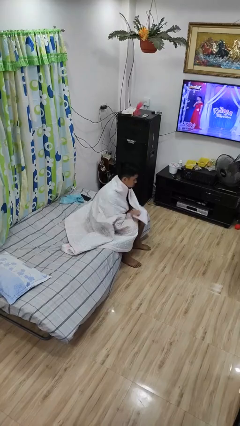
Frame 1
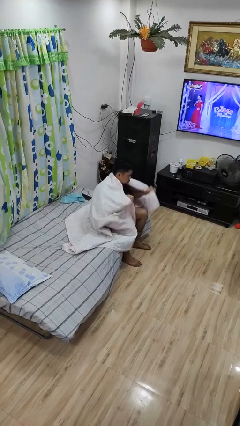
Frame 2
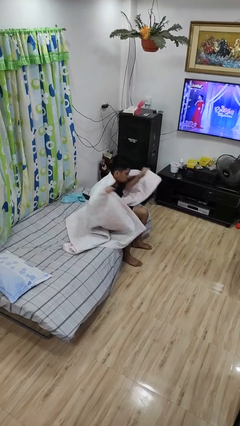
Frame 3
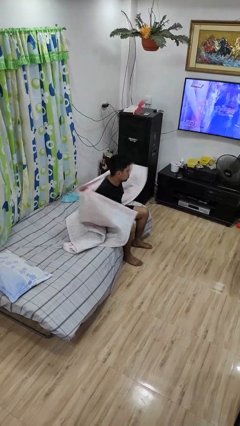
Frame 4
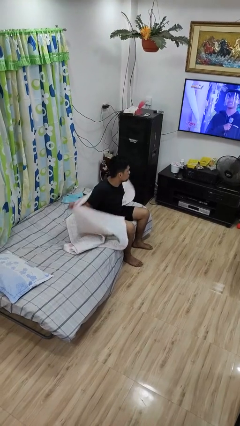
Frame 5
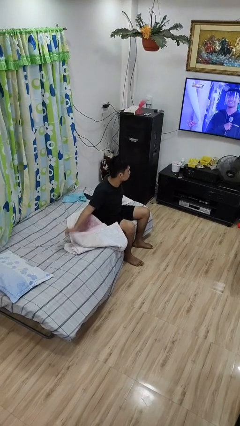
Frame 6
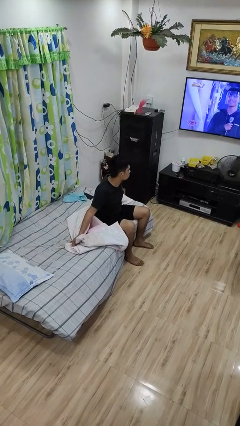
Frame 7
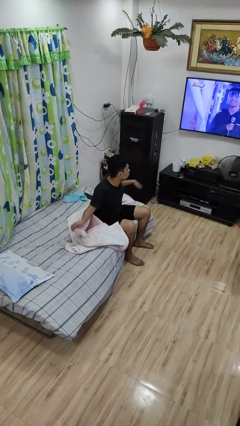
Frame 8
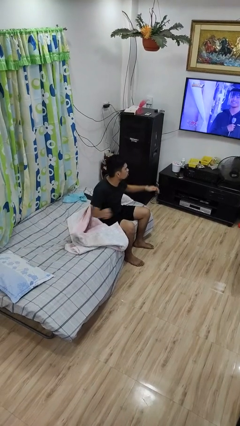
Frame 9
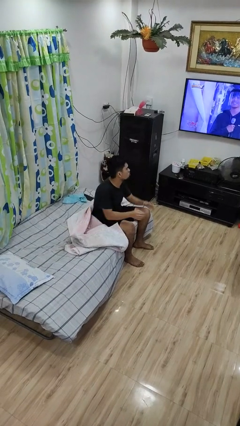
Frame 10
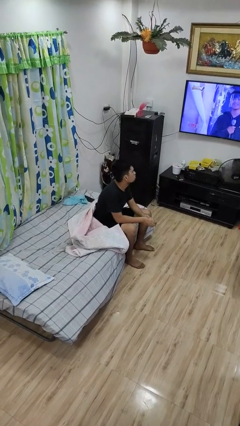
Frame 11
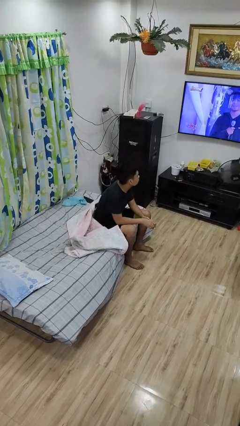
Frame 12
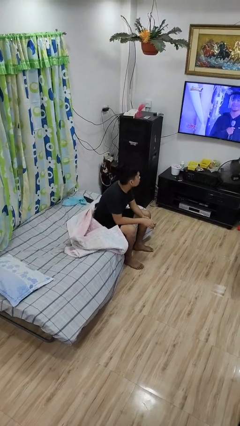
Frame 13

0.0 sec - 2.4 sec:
person uncovers with bedsheets

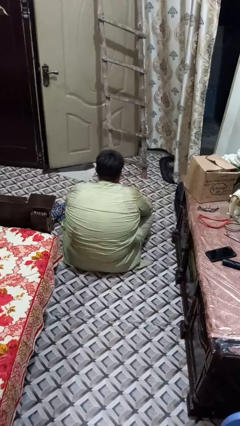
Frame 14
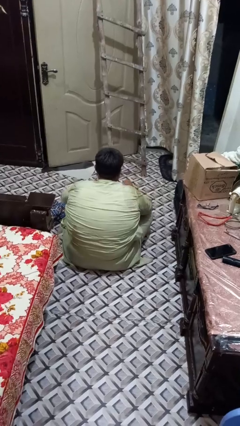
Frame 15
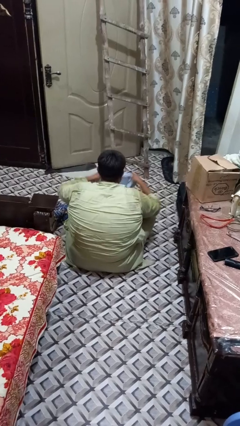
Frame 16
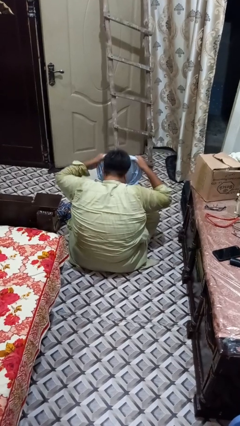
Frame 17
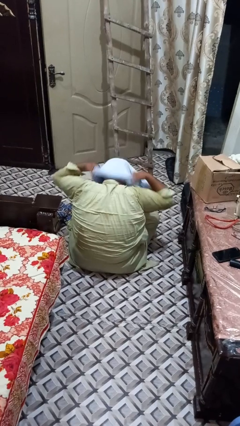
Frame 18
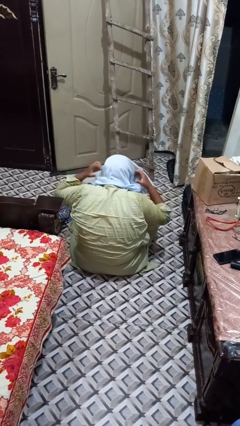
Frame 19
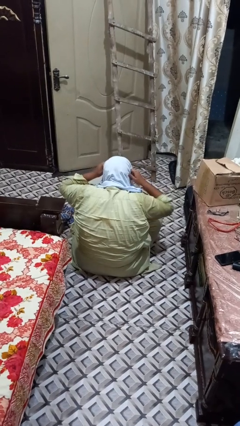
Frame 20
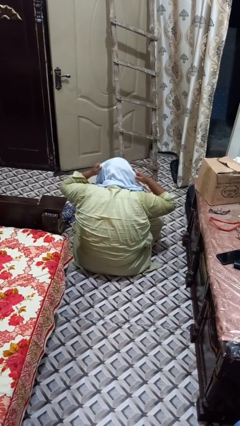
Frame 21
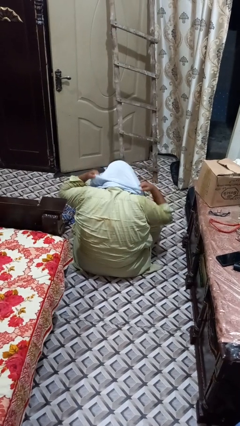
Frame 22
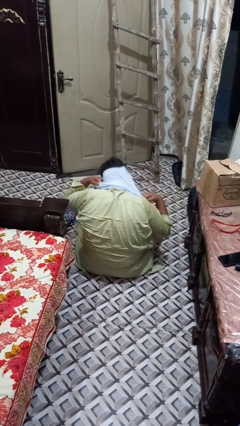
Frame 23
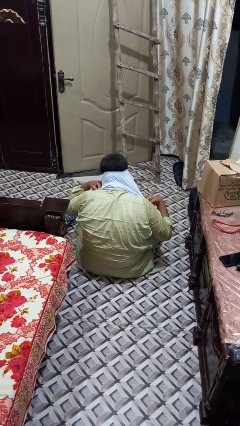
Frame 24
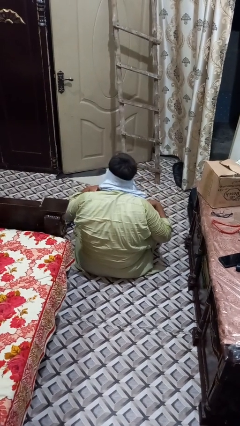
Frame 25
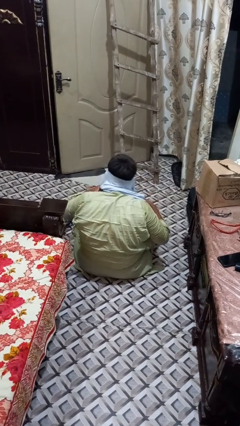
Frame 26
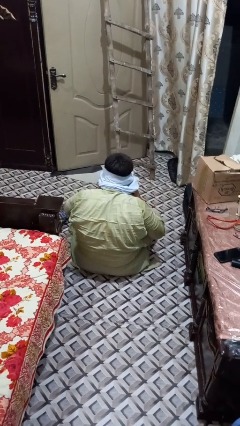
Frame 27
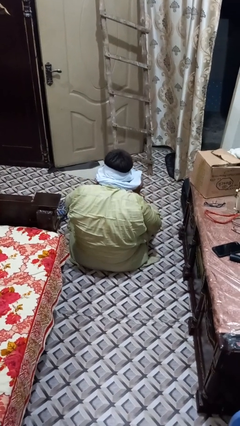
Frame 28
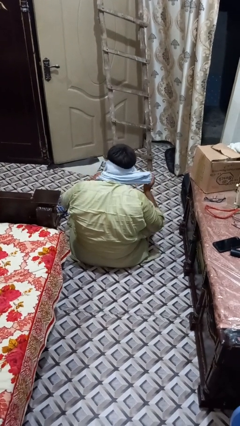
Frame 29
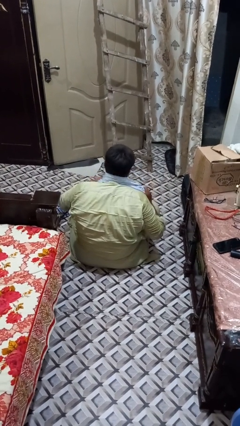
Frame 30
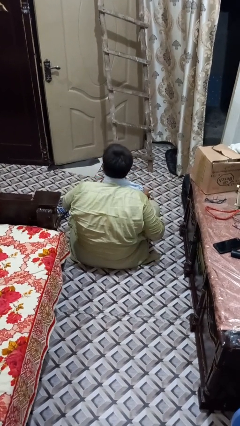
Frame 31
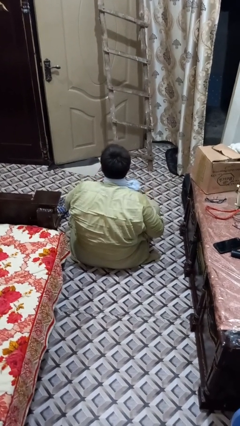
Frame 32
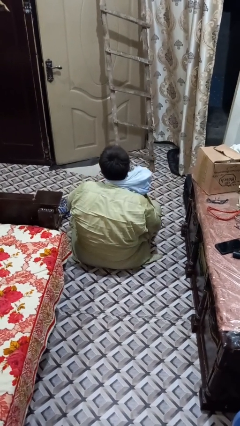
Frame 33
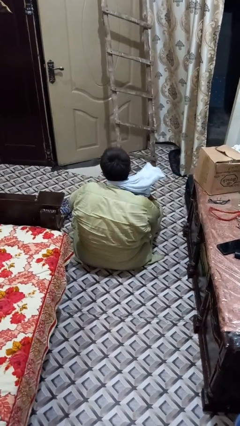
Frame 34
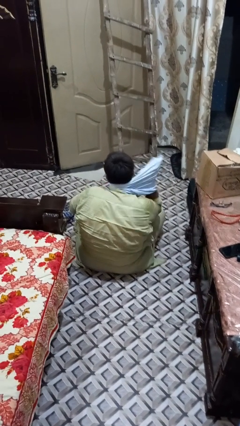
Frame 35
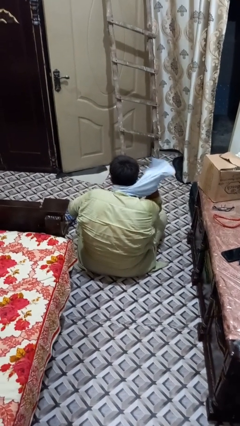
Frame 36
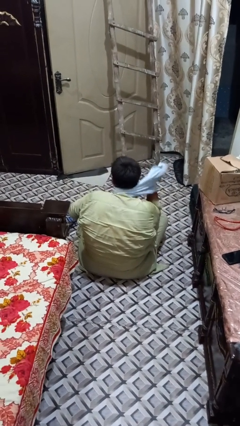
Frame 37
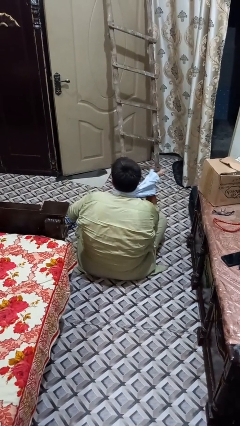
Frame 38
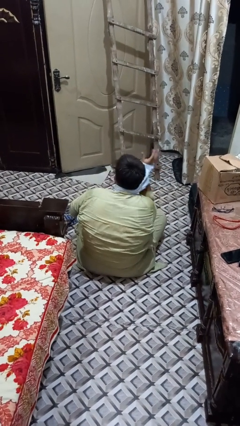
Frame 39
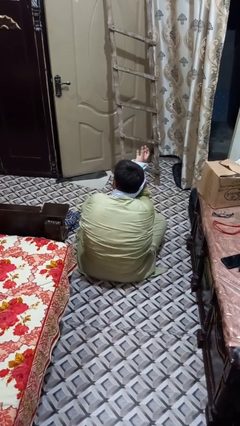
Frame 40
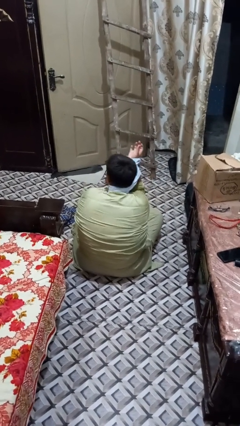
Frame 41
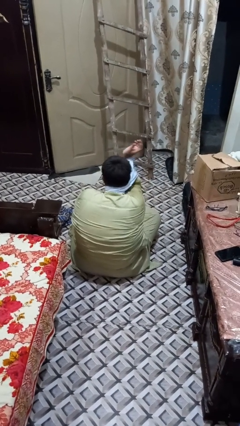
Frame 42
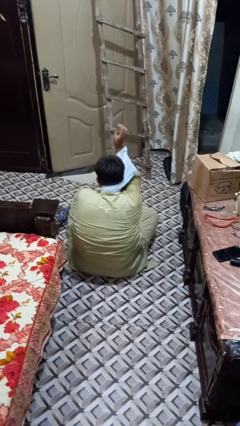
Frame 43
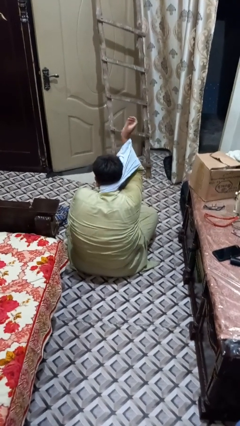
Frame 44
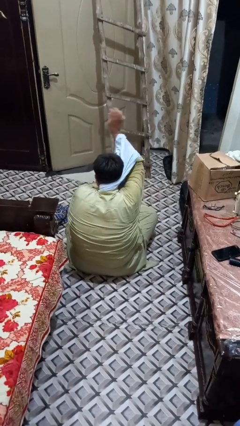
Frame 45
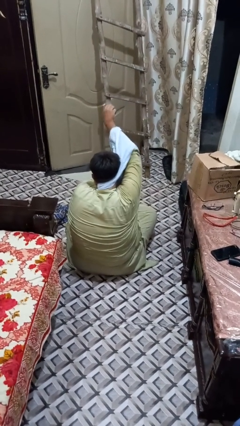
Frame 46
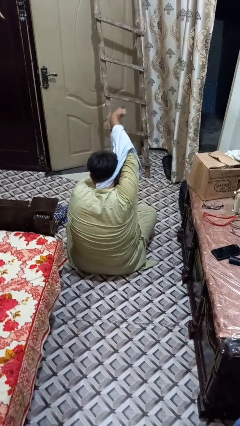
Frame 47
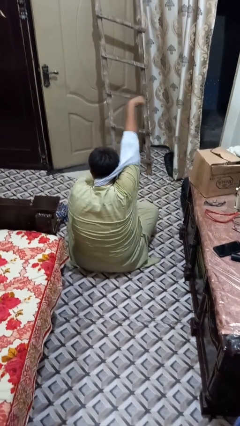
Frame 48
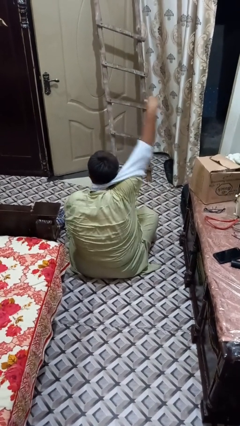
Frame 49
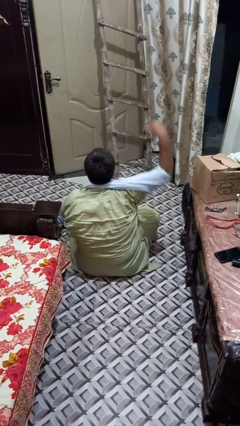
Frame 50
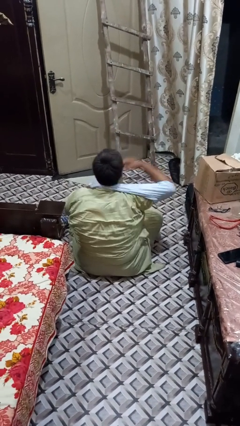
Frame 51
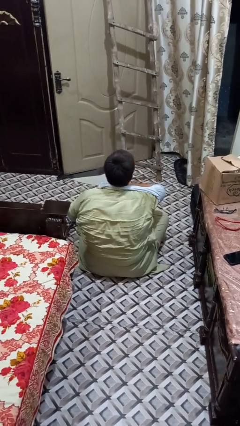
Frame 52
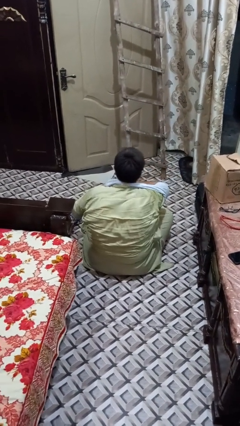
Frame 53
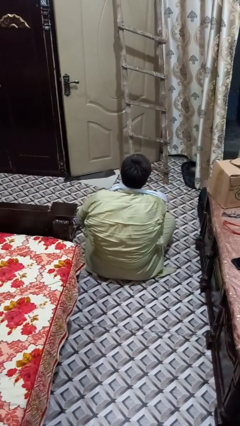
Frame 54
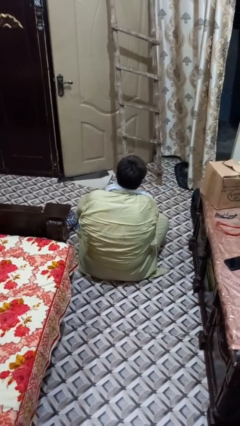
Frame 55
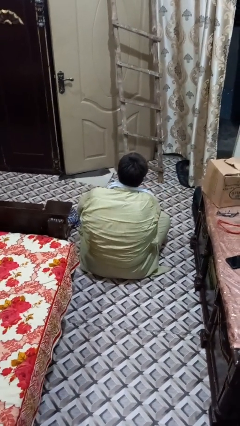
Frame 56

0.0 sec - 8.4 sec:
person puts on shirt

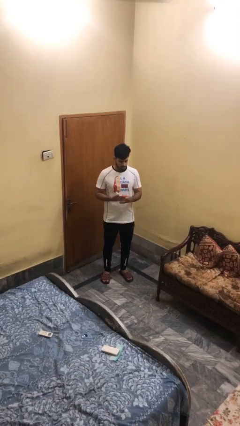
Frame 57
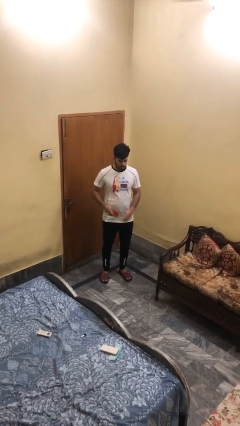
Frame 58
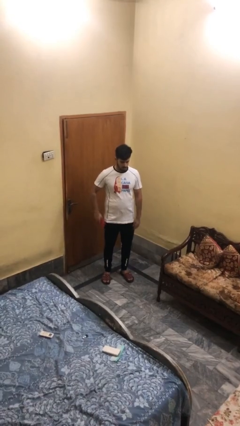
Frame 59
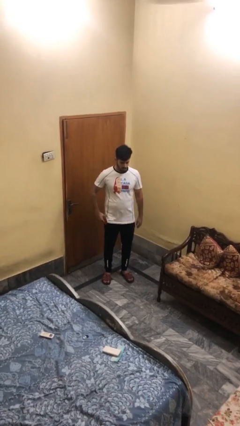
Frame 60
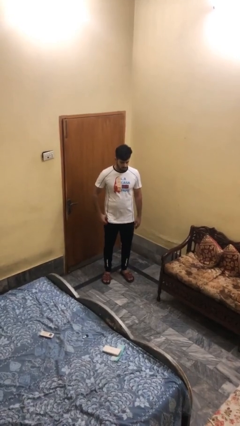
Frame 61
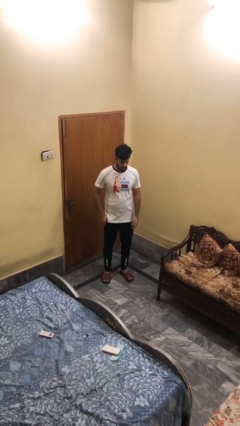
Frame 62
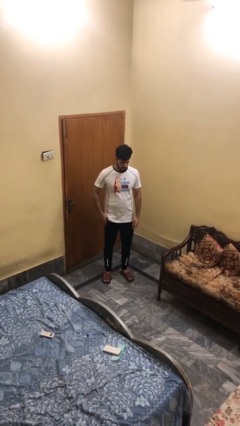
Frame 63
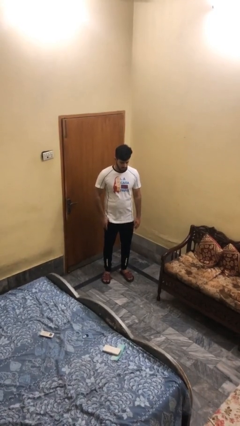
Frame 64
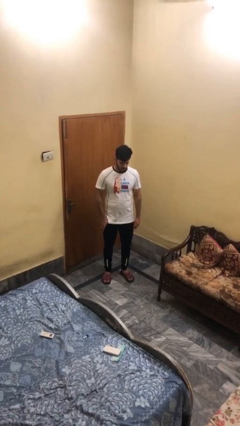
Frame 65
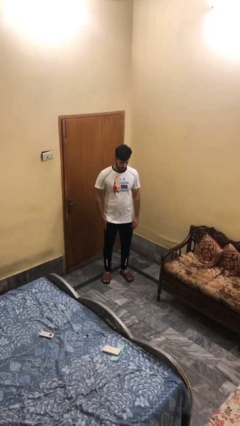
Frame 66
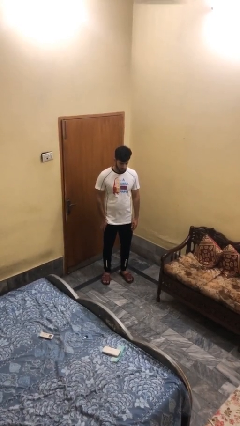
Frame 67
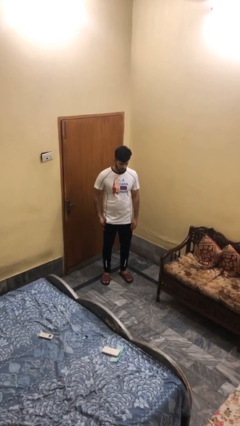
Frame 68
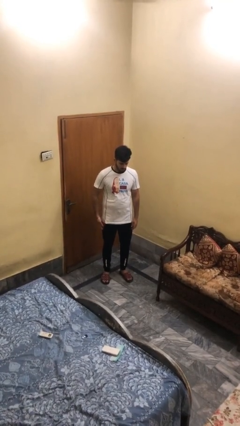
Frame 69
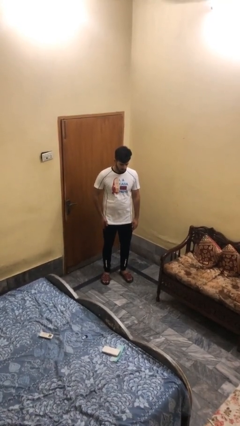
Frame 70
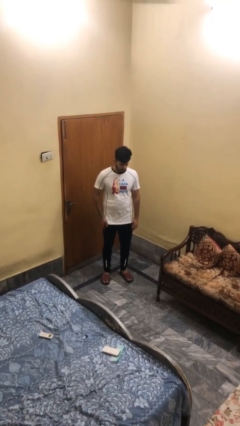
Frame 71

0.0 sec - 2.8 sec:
person puts phone into pocket

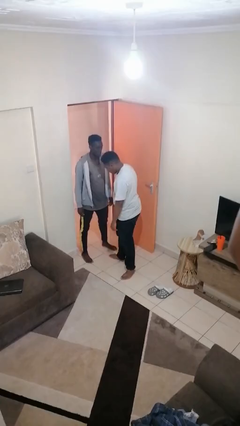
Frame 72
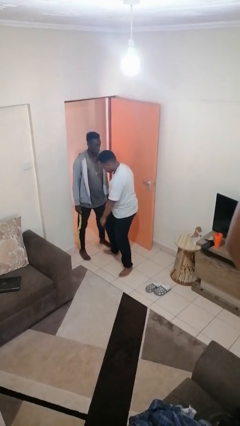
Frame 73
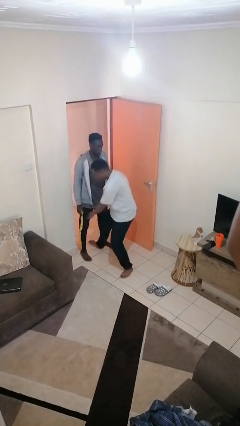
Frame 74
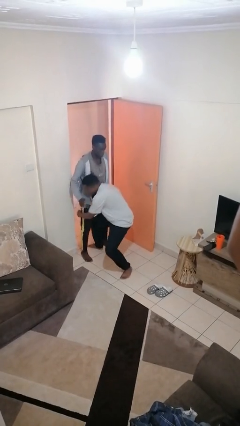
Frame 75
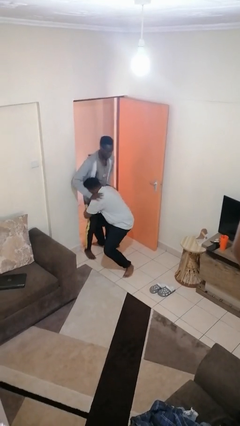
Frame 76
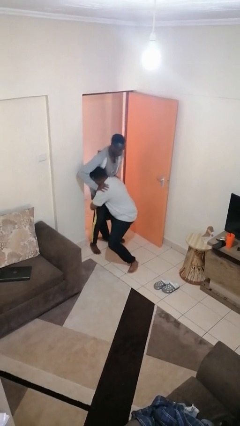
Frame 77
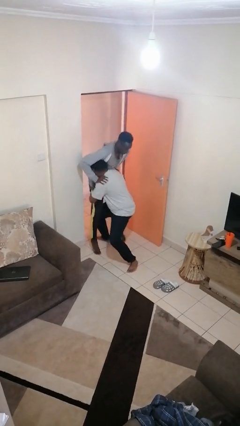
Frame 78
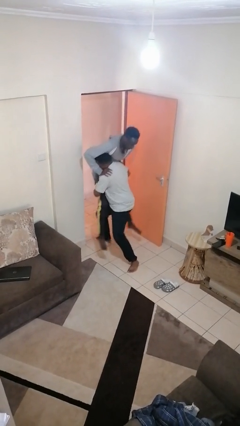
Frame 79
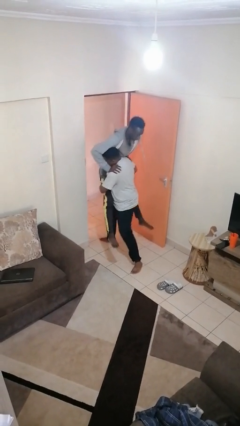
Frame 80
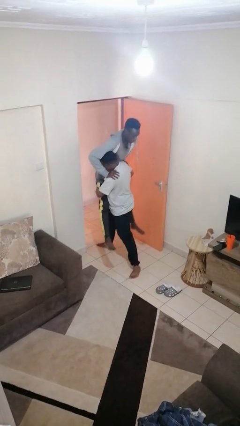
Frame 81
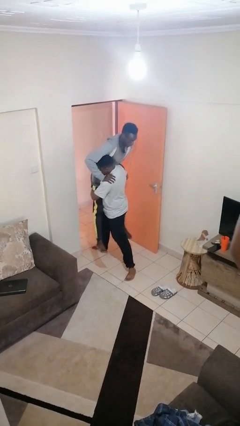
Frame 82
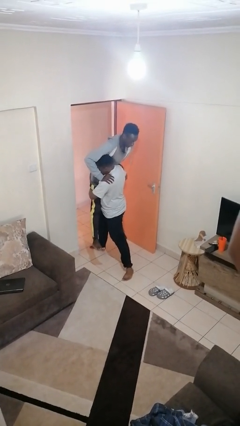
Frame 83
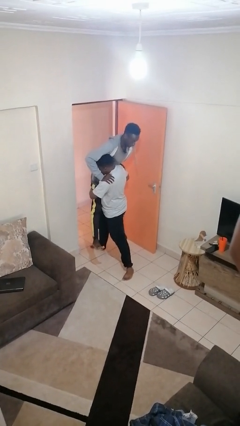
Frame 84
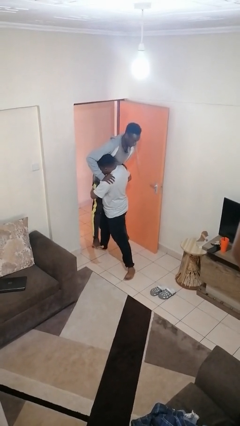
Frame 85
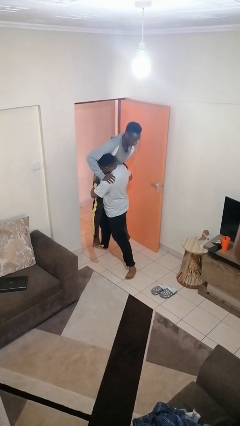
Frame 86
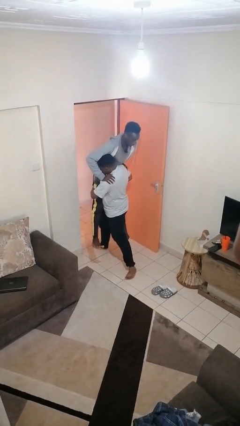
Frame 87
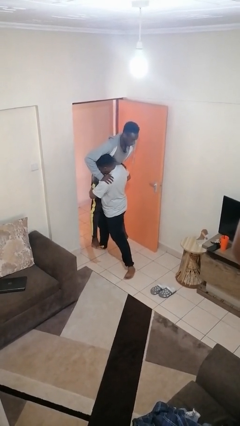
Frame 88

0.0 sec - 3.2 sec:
person picks up person

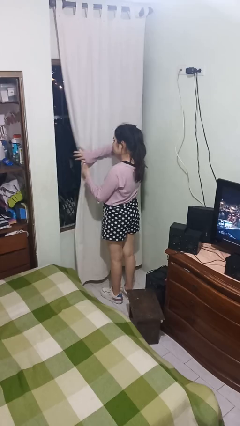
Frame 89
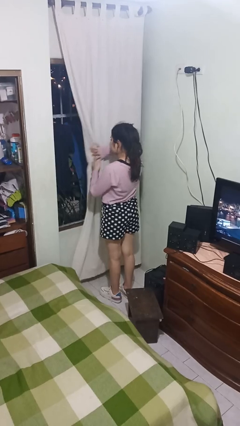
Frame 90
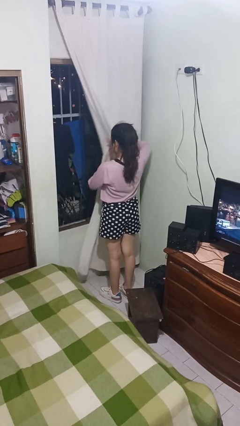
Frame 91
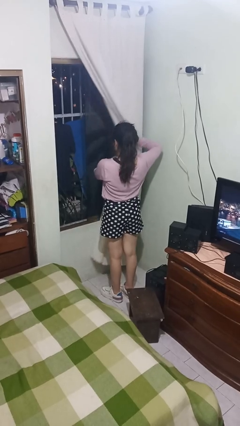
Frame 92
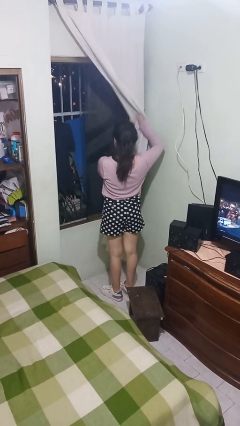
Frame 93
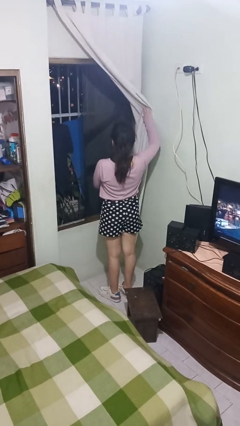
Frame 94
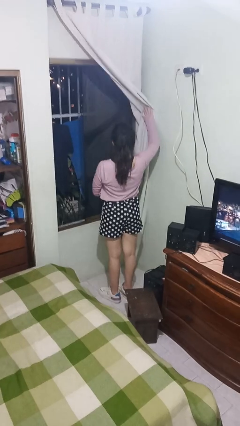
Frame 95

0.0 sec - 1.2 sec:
person opens curtains
